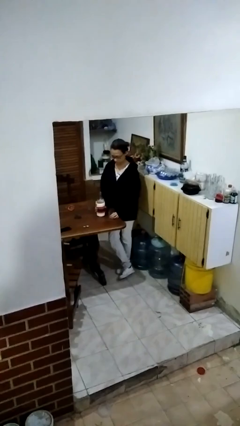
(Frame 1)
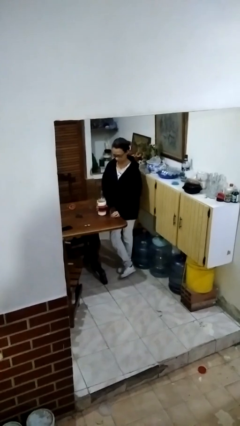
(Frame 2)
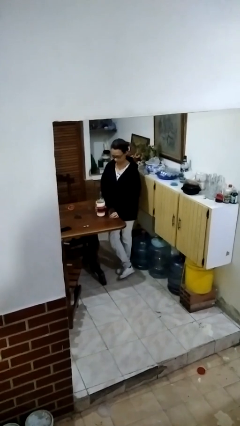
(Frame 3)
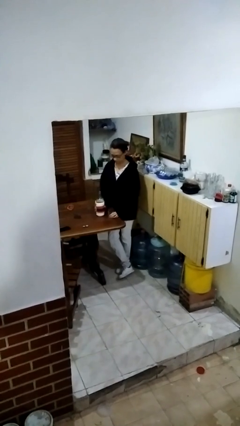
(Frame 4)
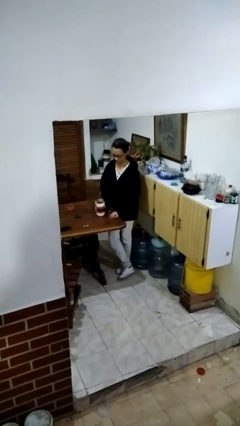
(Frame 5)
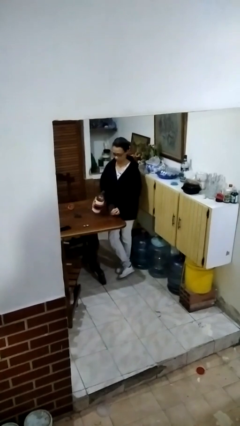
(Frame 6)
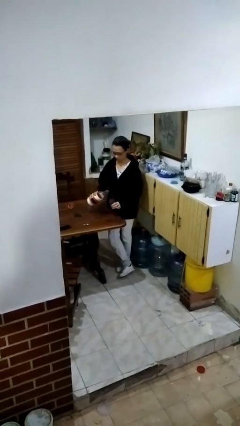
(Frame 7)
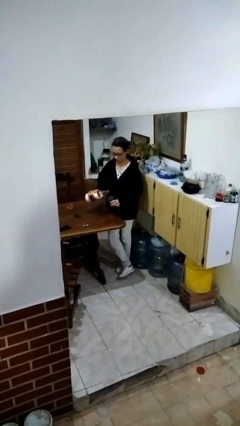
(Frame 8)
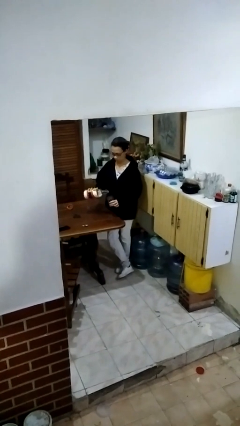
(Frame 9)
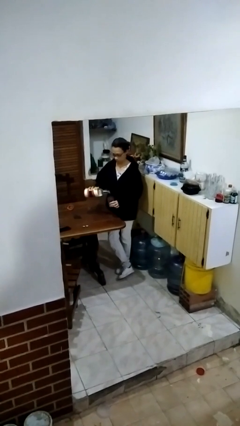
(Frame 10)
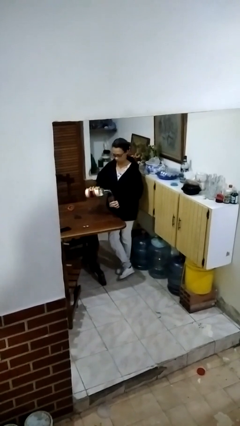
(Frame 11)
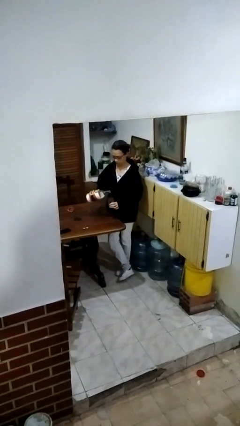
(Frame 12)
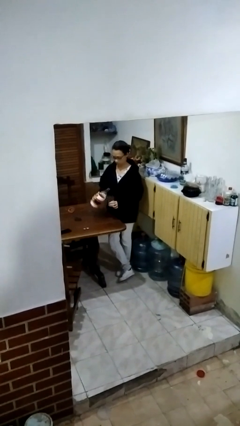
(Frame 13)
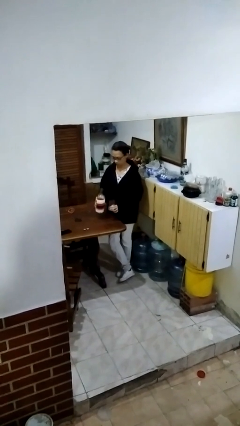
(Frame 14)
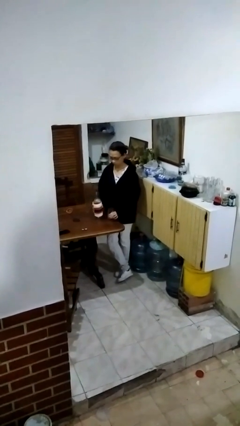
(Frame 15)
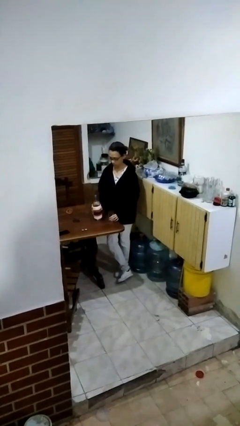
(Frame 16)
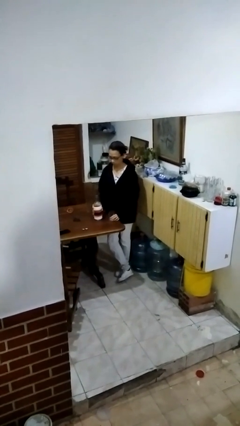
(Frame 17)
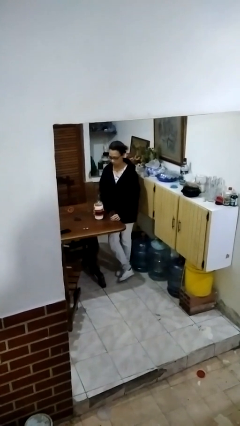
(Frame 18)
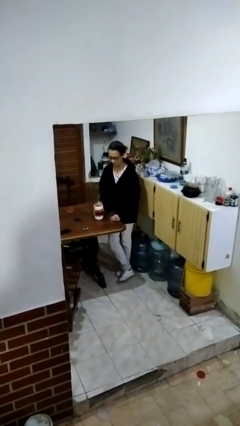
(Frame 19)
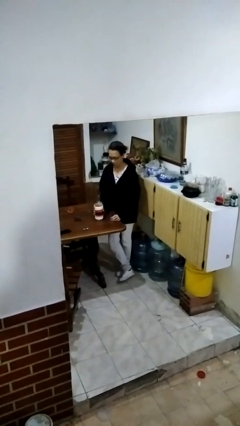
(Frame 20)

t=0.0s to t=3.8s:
person pours liquid into cup

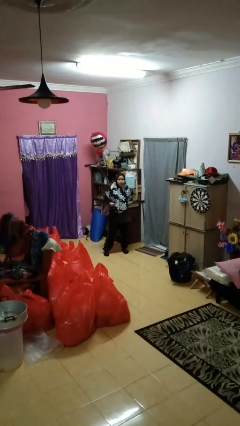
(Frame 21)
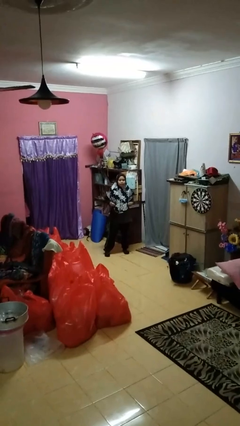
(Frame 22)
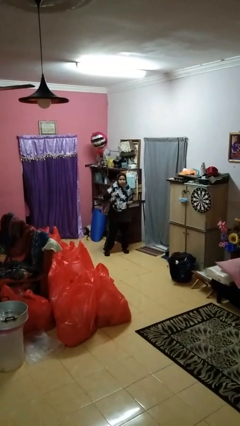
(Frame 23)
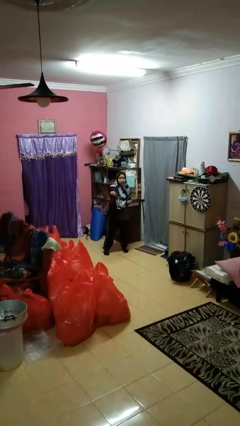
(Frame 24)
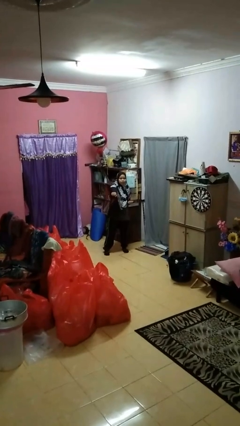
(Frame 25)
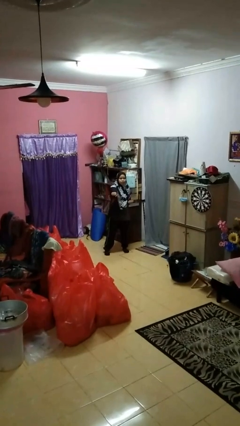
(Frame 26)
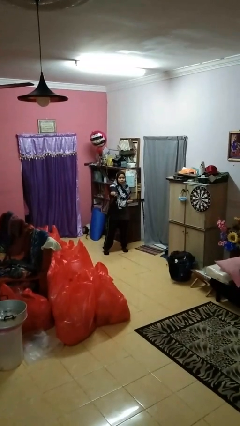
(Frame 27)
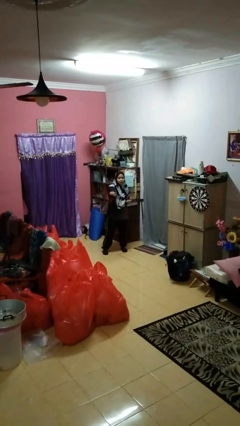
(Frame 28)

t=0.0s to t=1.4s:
person punches

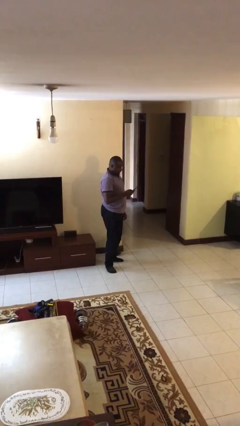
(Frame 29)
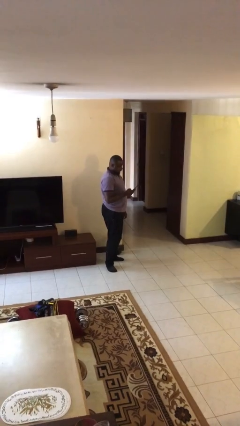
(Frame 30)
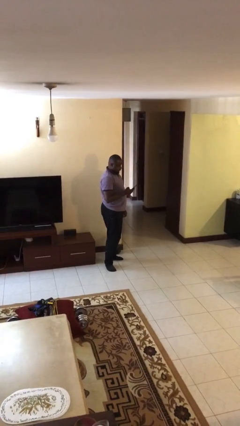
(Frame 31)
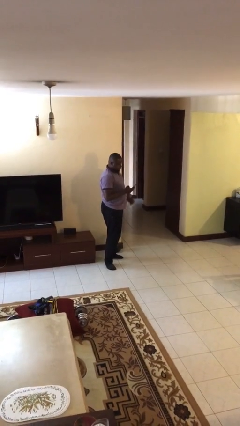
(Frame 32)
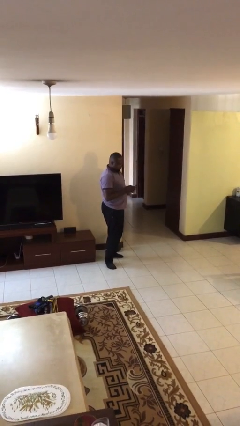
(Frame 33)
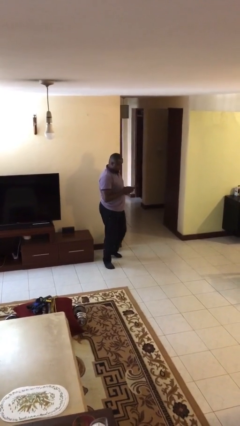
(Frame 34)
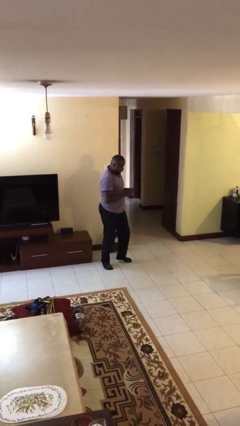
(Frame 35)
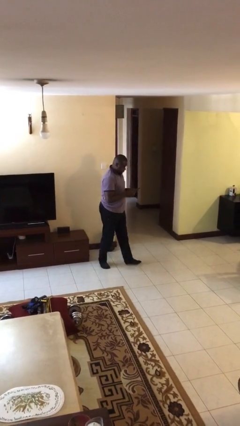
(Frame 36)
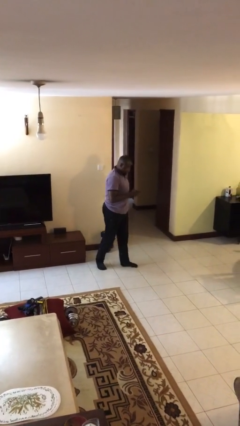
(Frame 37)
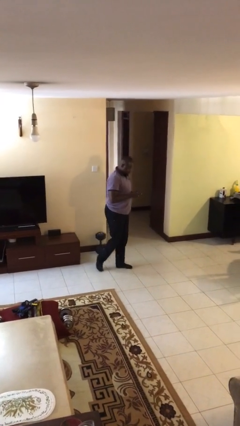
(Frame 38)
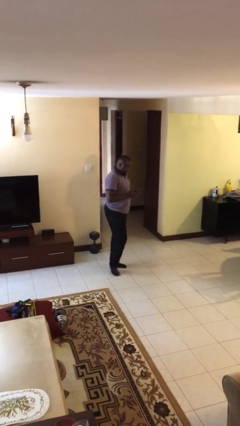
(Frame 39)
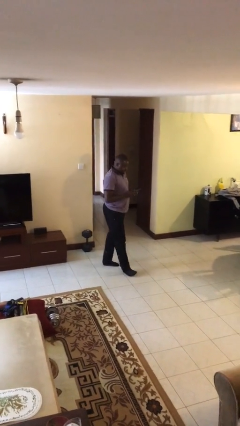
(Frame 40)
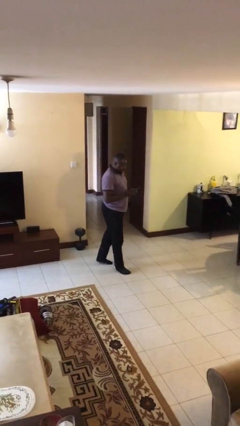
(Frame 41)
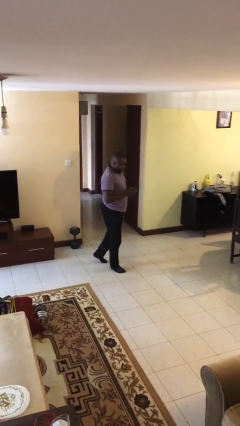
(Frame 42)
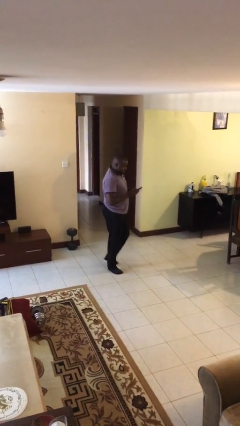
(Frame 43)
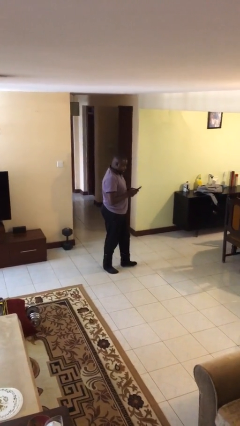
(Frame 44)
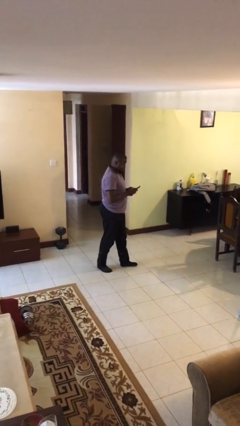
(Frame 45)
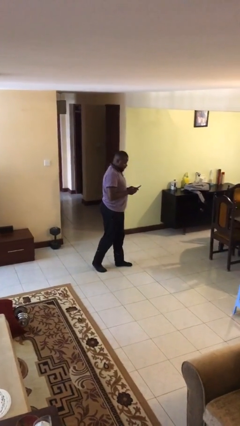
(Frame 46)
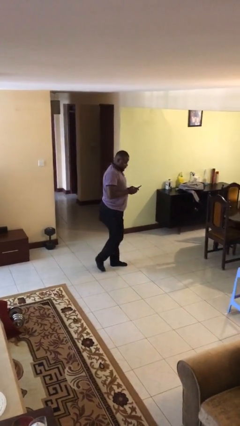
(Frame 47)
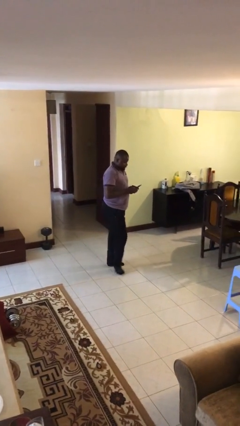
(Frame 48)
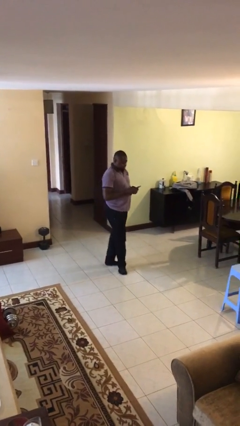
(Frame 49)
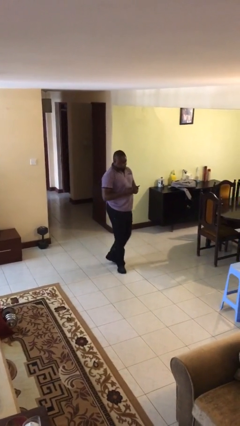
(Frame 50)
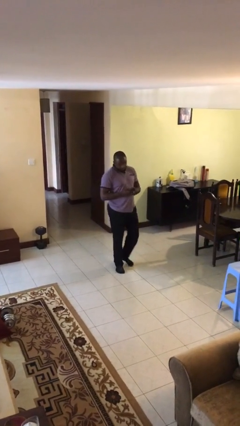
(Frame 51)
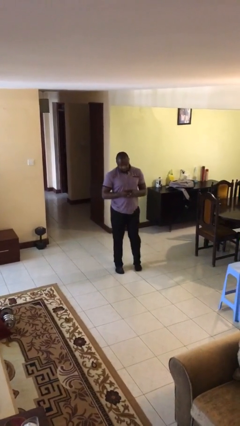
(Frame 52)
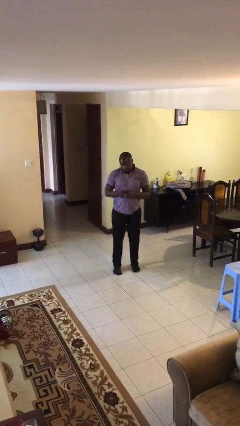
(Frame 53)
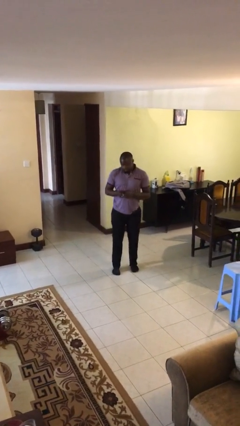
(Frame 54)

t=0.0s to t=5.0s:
person texts on phone

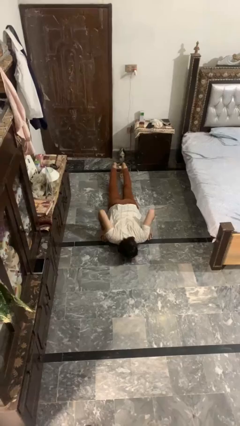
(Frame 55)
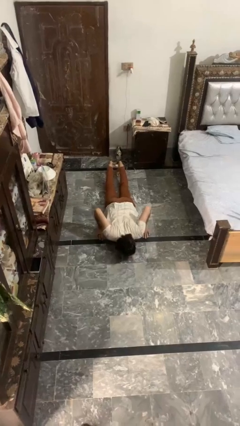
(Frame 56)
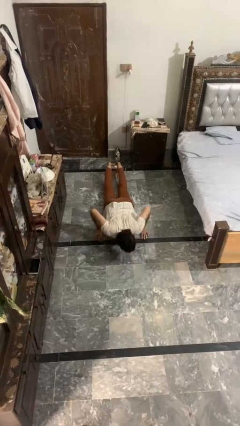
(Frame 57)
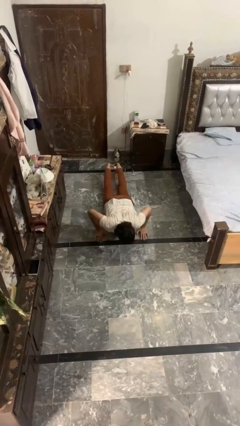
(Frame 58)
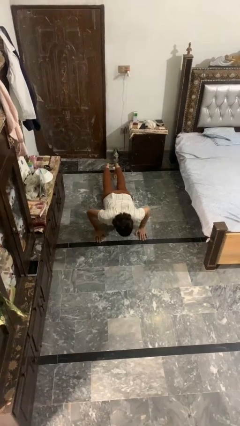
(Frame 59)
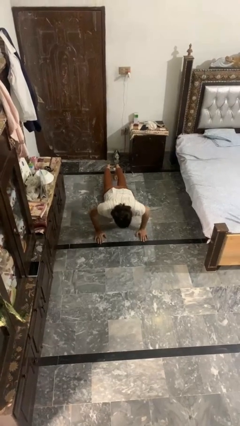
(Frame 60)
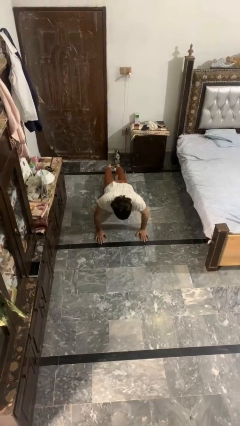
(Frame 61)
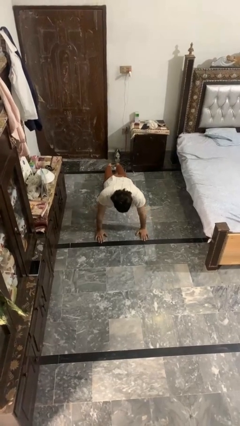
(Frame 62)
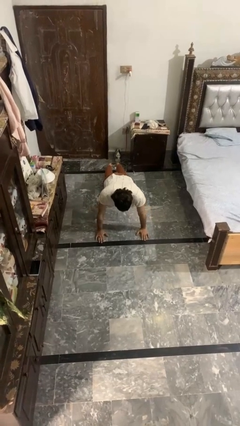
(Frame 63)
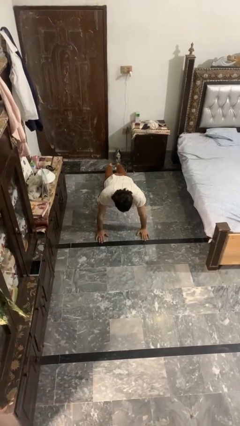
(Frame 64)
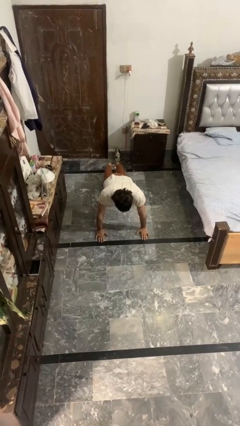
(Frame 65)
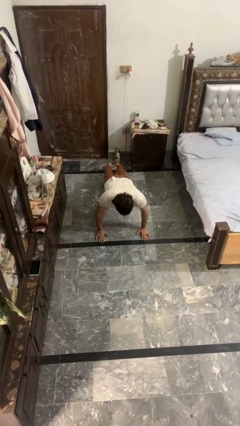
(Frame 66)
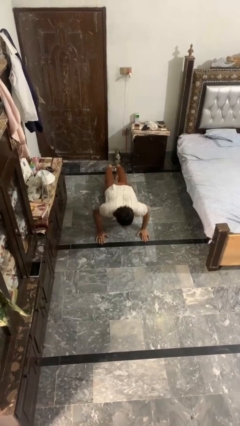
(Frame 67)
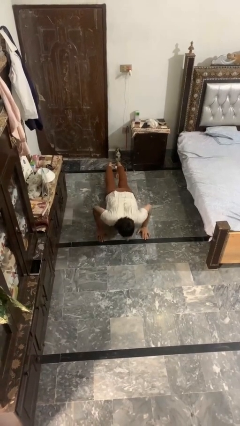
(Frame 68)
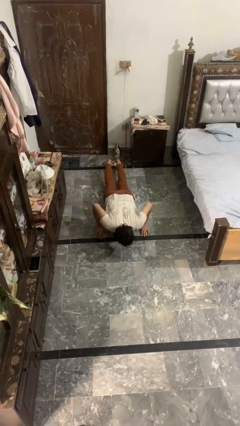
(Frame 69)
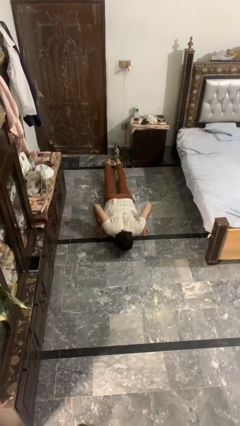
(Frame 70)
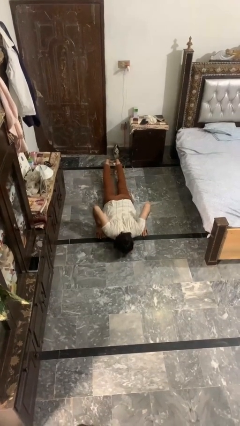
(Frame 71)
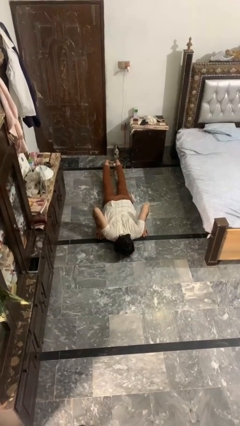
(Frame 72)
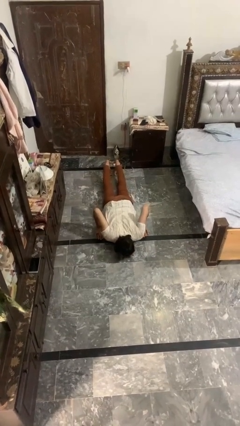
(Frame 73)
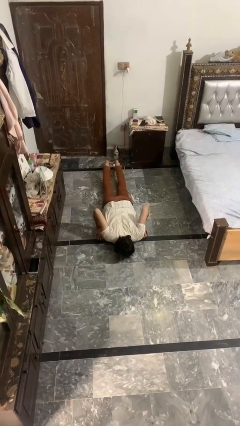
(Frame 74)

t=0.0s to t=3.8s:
person exercises with pushup

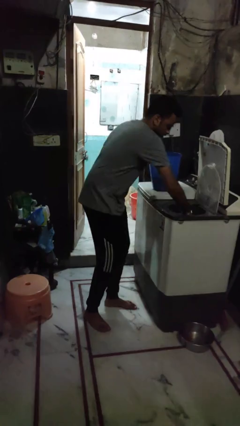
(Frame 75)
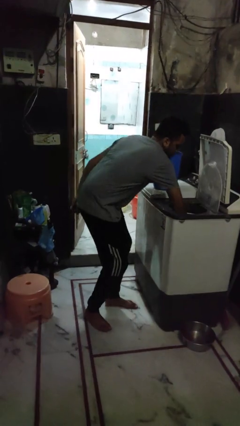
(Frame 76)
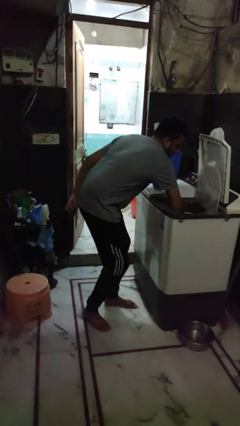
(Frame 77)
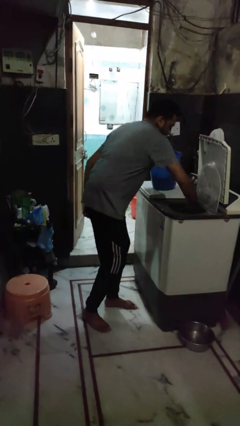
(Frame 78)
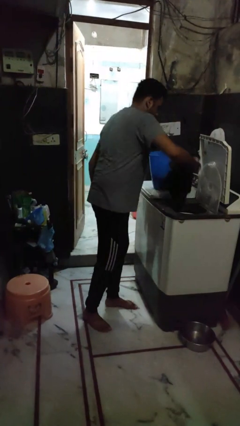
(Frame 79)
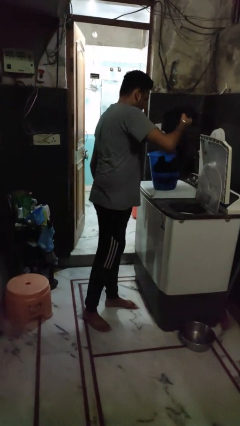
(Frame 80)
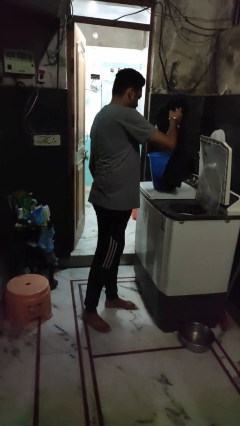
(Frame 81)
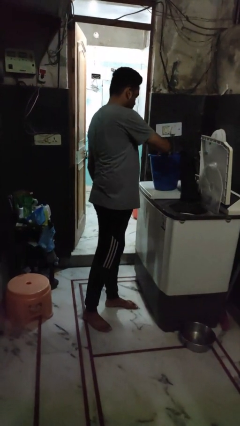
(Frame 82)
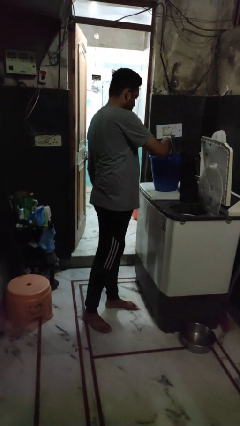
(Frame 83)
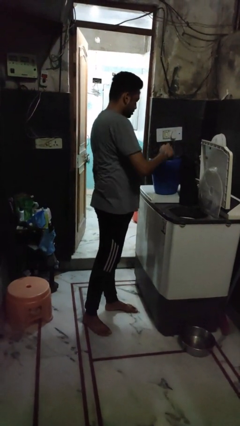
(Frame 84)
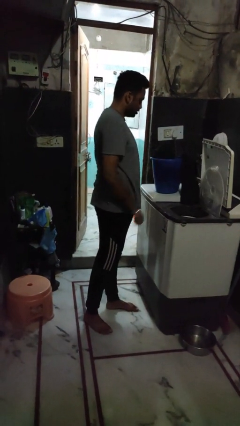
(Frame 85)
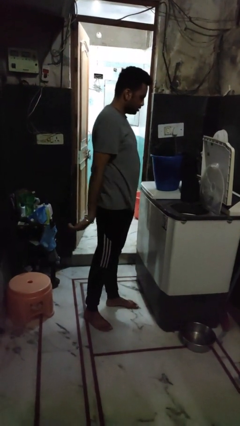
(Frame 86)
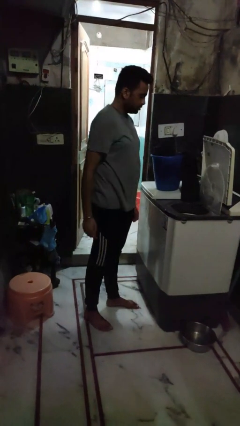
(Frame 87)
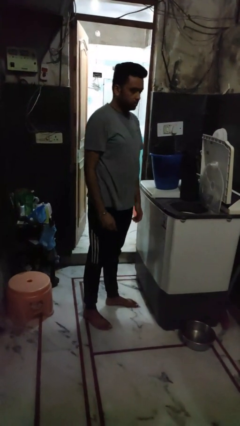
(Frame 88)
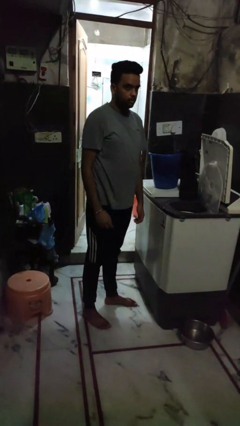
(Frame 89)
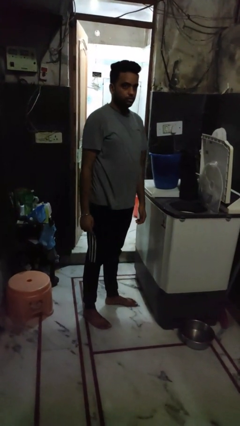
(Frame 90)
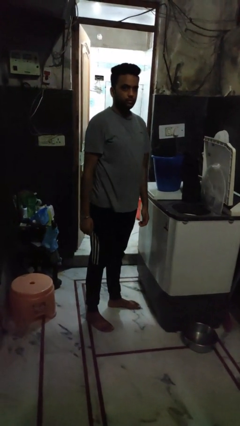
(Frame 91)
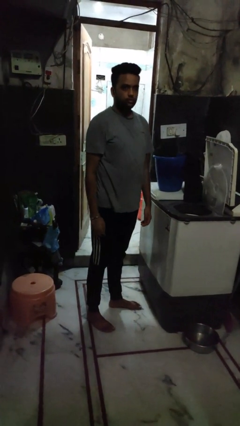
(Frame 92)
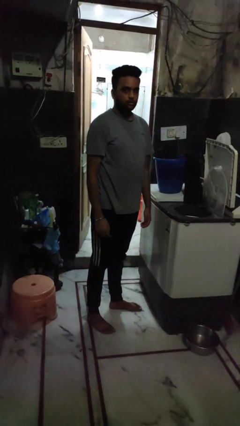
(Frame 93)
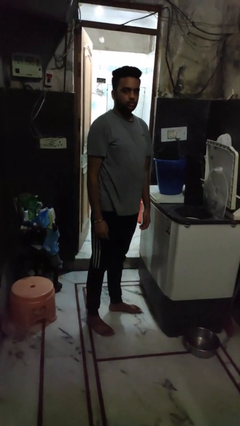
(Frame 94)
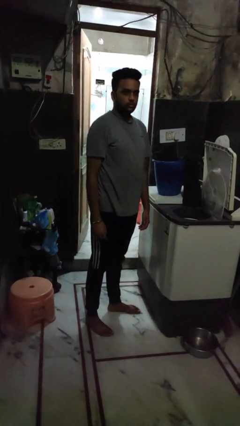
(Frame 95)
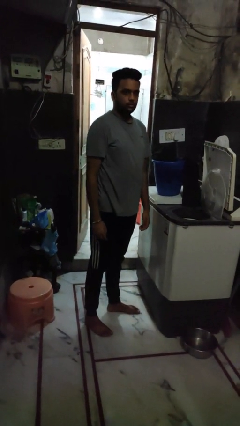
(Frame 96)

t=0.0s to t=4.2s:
person unloads dryer
